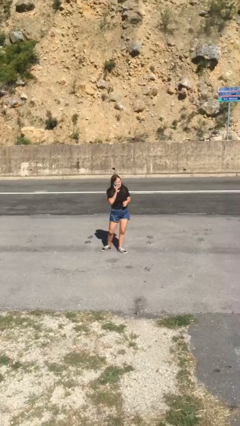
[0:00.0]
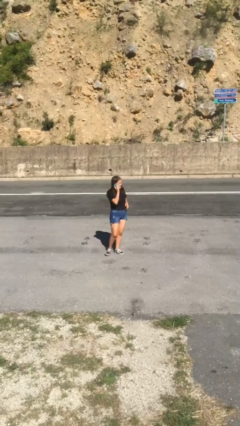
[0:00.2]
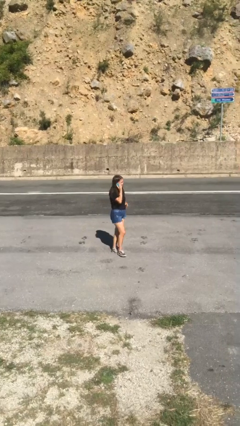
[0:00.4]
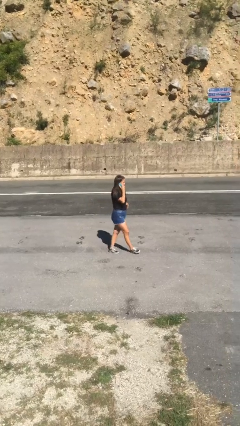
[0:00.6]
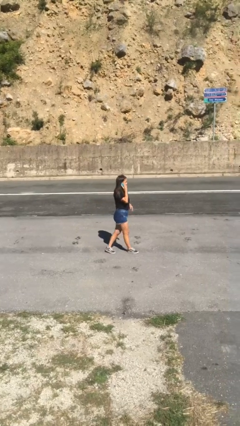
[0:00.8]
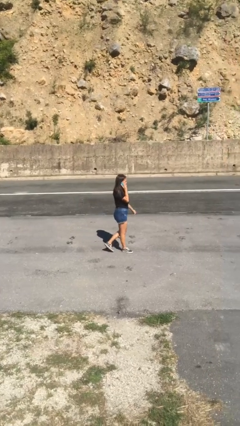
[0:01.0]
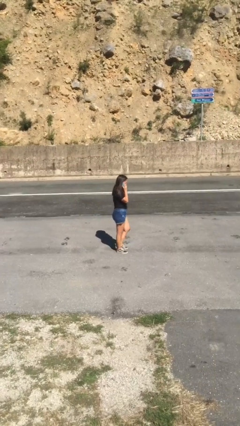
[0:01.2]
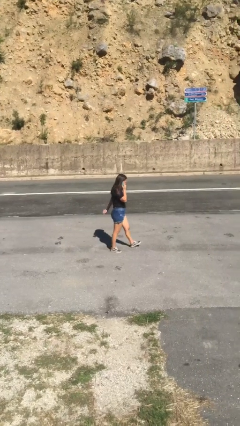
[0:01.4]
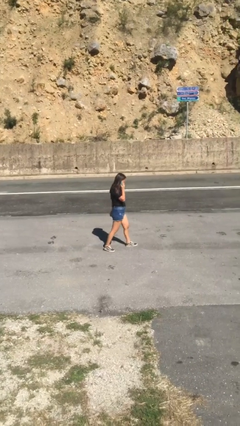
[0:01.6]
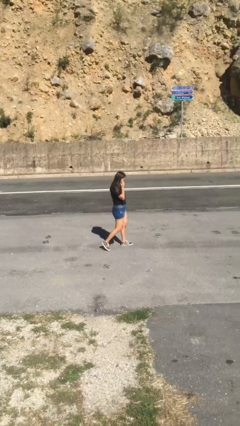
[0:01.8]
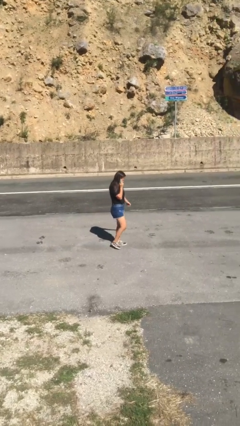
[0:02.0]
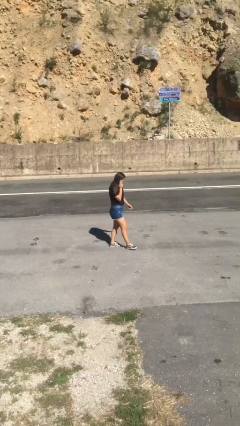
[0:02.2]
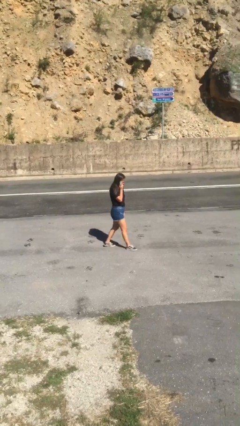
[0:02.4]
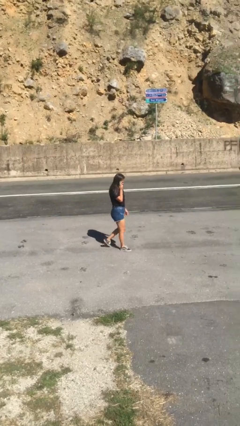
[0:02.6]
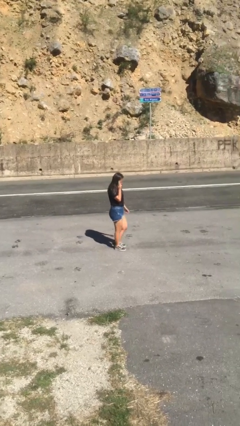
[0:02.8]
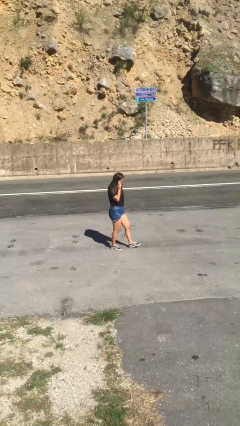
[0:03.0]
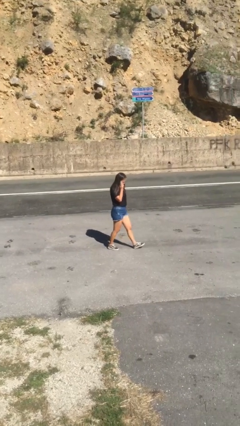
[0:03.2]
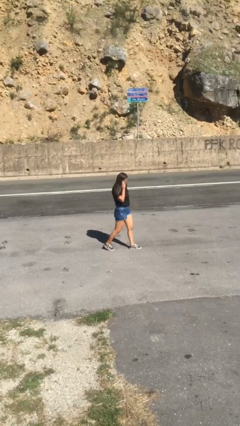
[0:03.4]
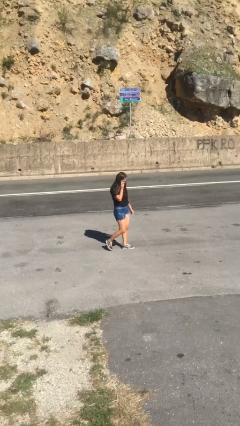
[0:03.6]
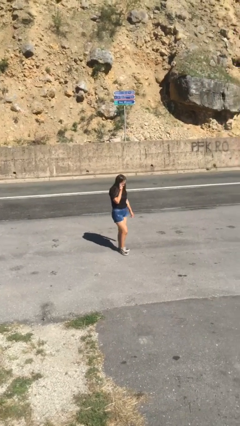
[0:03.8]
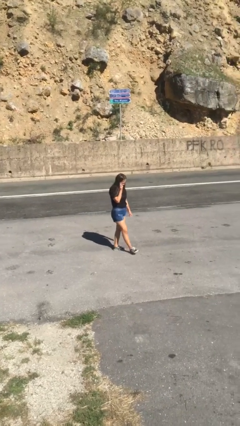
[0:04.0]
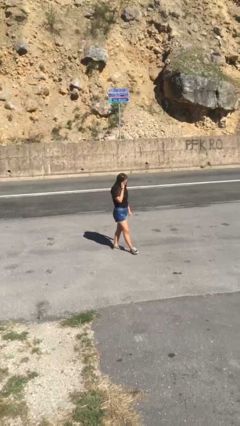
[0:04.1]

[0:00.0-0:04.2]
person talks on phone

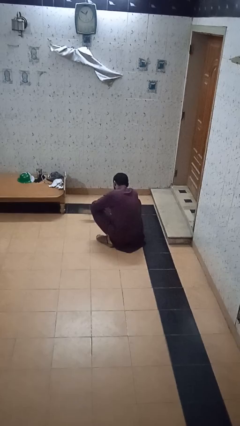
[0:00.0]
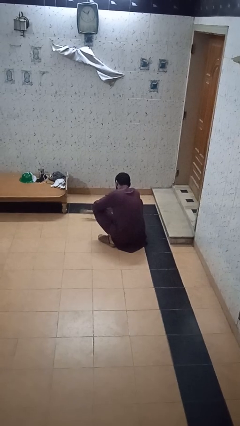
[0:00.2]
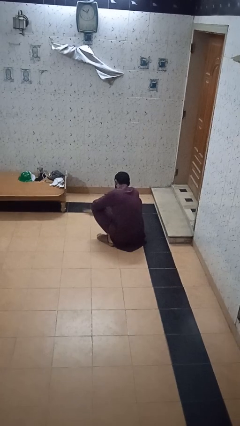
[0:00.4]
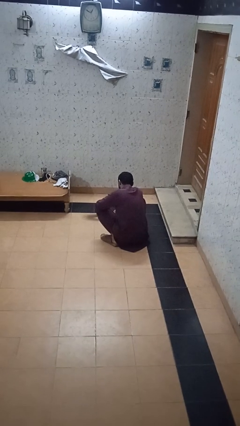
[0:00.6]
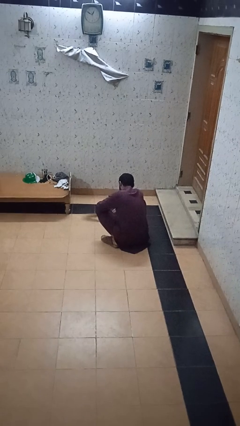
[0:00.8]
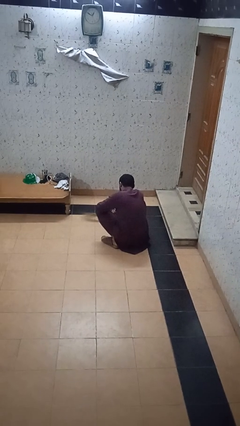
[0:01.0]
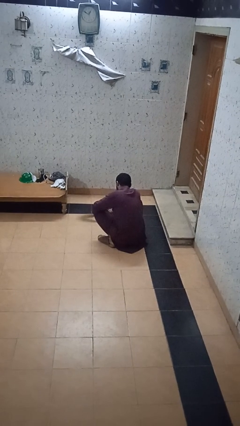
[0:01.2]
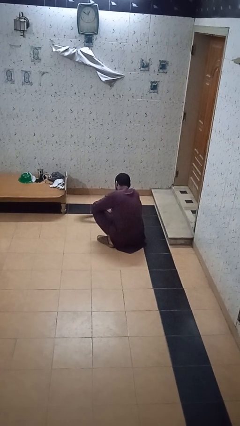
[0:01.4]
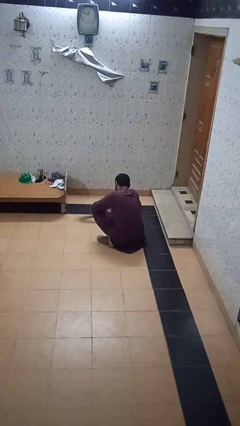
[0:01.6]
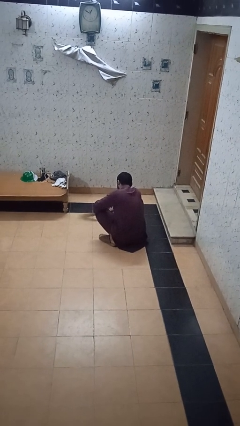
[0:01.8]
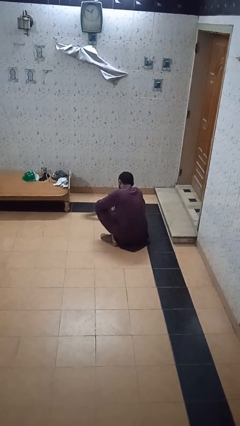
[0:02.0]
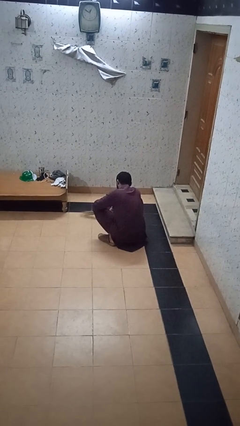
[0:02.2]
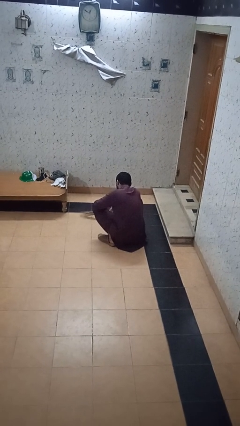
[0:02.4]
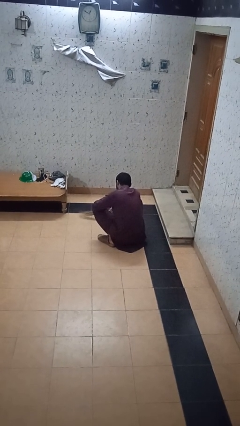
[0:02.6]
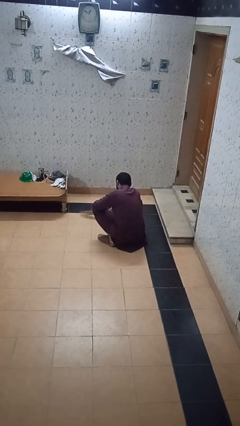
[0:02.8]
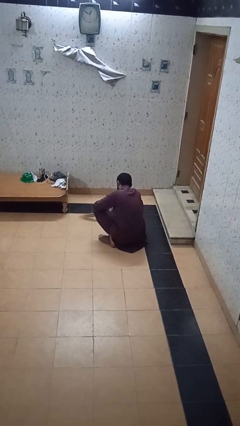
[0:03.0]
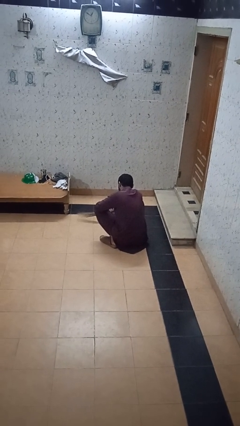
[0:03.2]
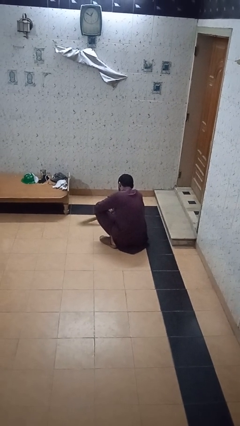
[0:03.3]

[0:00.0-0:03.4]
person sweeps floor

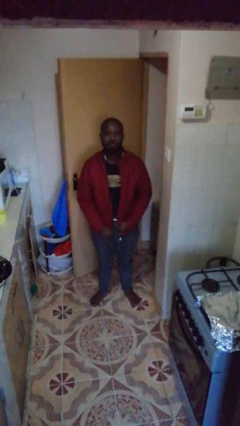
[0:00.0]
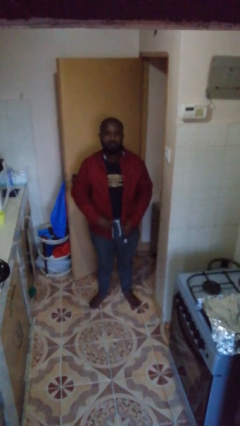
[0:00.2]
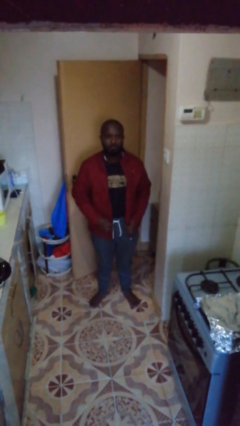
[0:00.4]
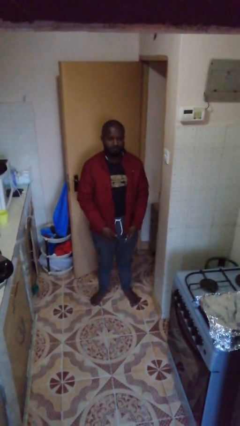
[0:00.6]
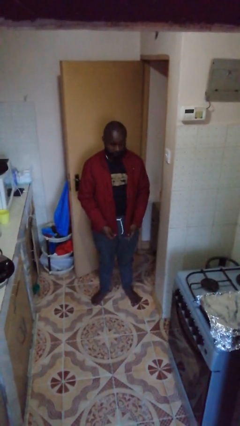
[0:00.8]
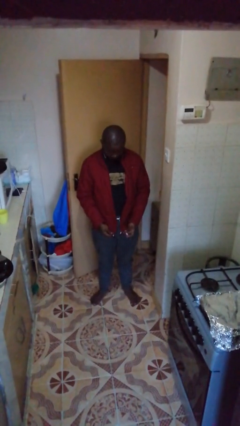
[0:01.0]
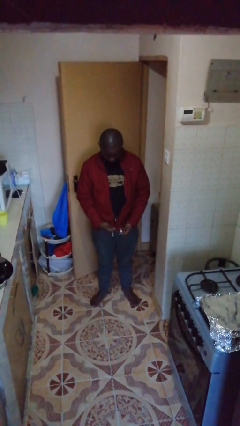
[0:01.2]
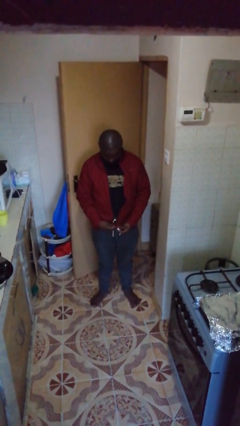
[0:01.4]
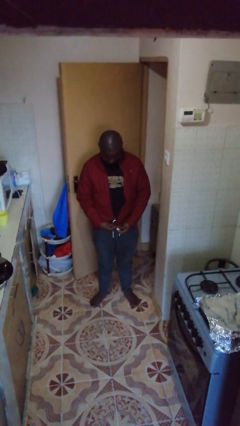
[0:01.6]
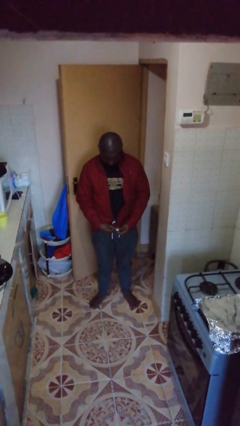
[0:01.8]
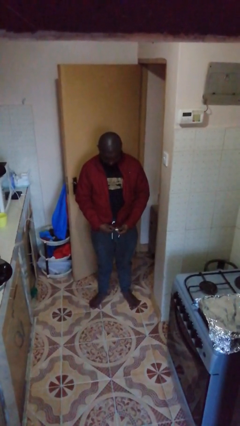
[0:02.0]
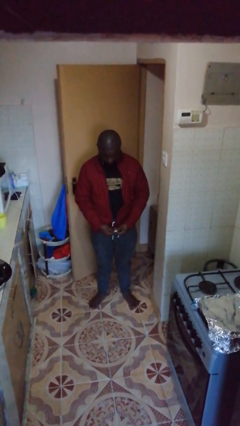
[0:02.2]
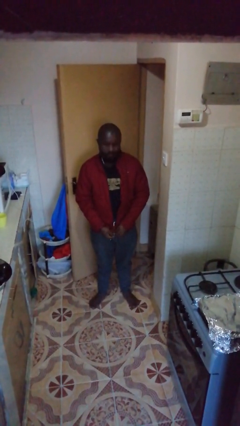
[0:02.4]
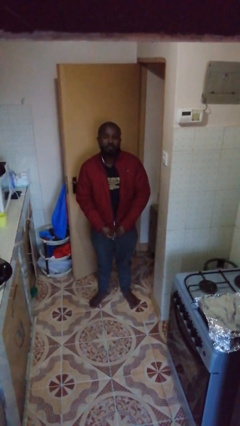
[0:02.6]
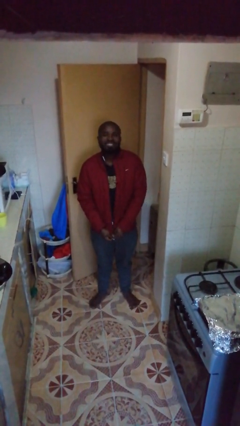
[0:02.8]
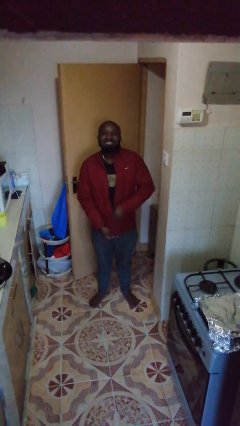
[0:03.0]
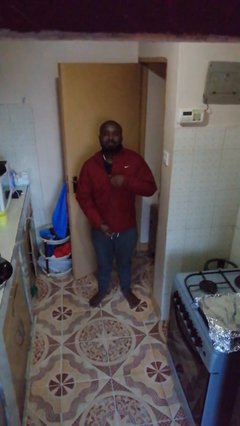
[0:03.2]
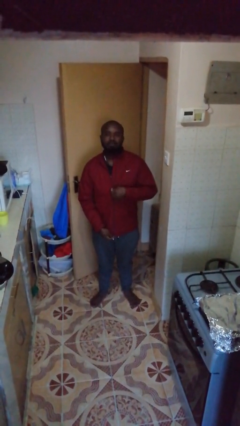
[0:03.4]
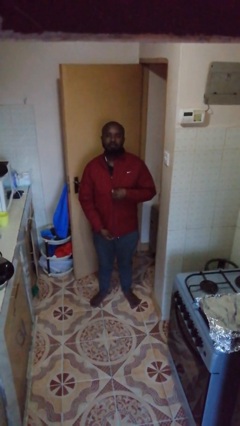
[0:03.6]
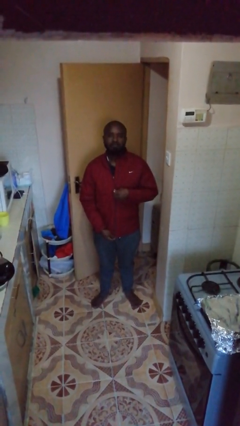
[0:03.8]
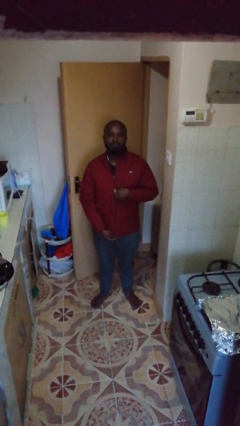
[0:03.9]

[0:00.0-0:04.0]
person zips up jacket

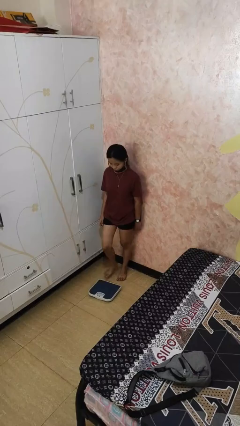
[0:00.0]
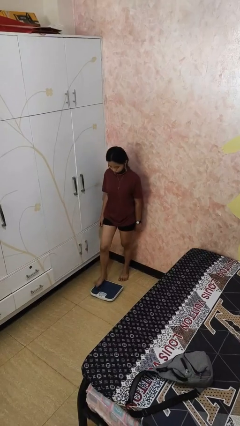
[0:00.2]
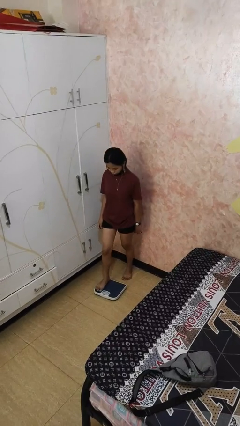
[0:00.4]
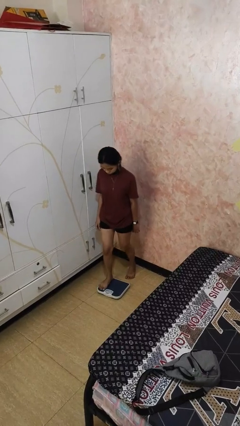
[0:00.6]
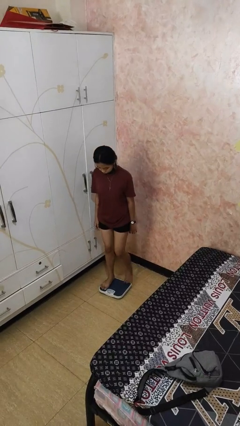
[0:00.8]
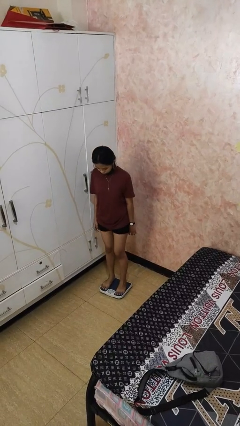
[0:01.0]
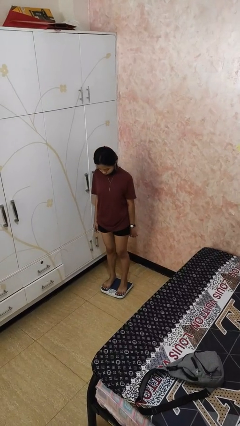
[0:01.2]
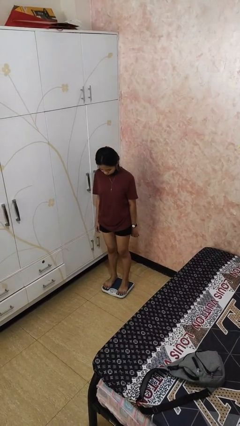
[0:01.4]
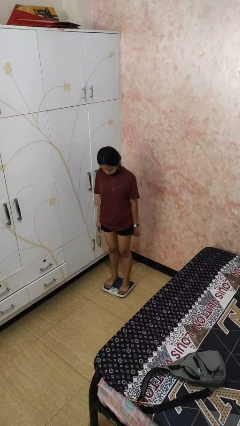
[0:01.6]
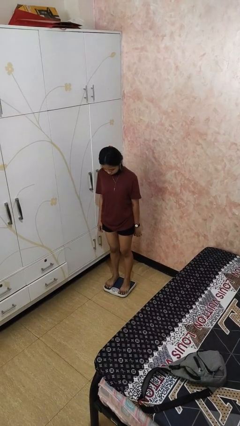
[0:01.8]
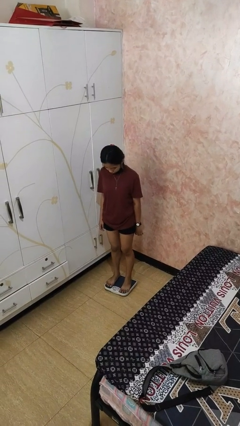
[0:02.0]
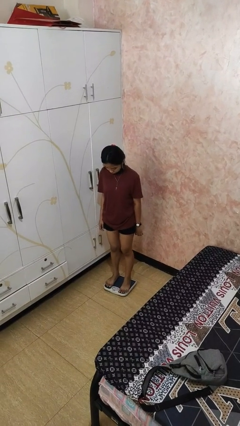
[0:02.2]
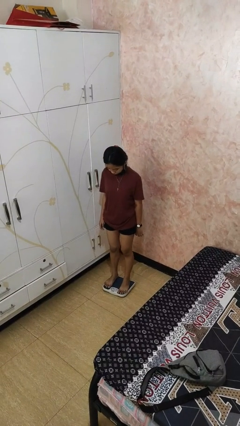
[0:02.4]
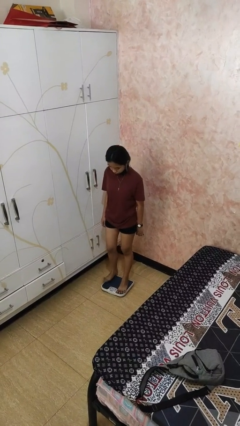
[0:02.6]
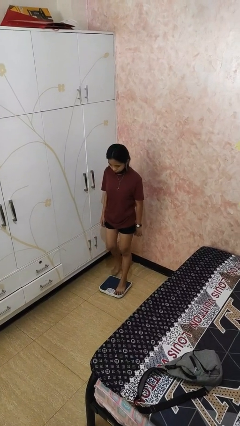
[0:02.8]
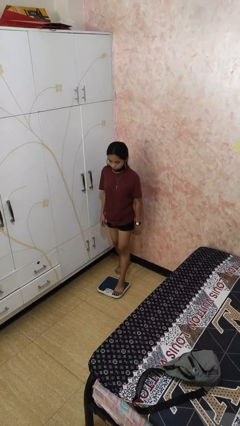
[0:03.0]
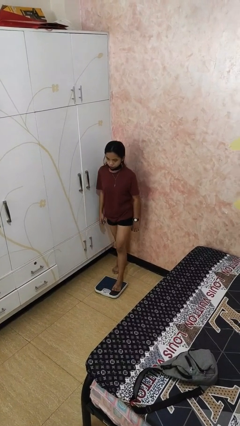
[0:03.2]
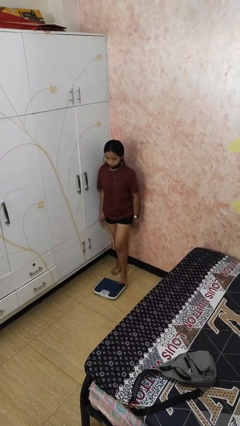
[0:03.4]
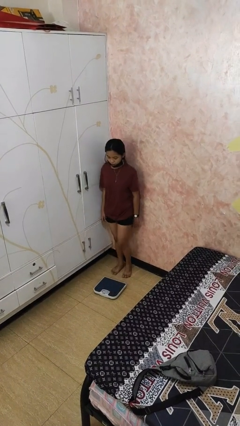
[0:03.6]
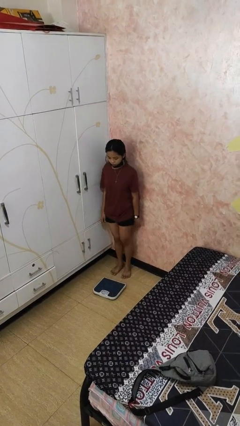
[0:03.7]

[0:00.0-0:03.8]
person uses bodyweight scale

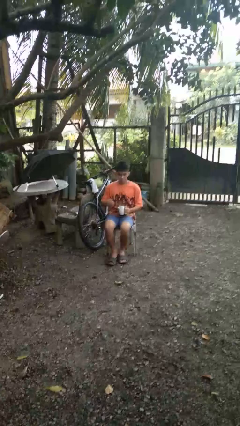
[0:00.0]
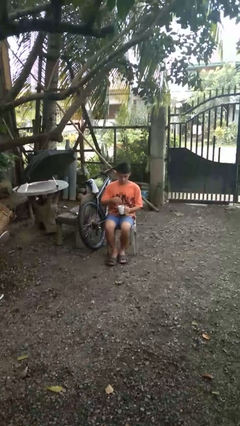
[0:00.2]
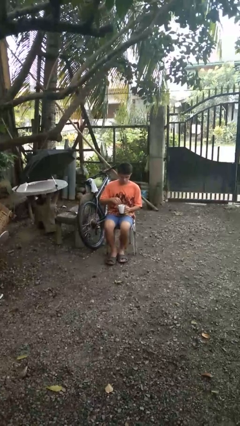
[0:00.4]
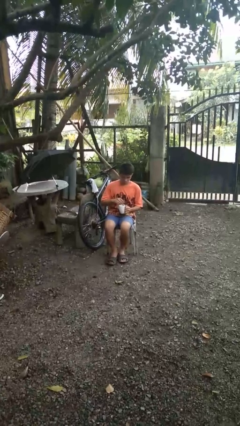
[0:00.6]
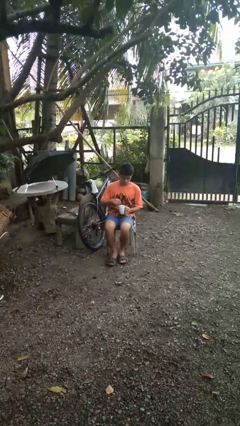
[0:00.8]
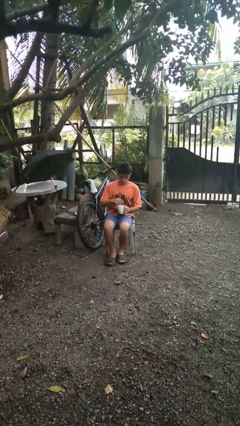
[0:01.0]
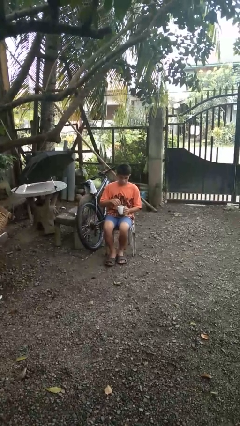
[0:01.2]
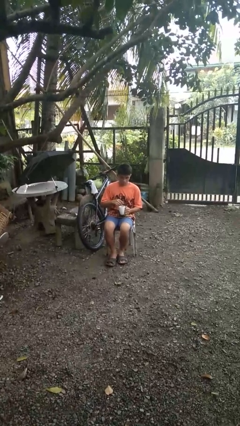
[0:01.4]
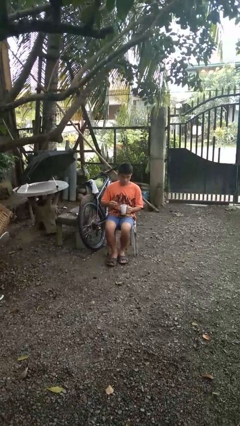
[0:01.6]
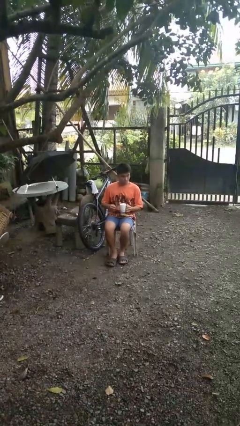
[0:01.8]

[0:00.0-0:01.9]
person stirs mug

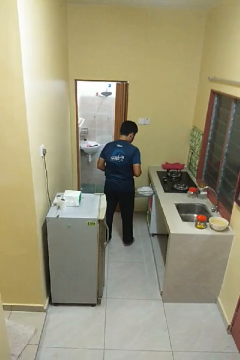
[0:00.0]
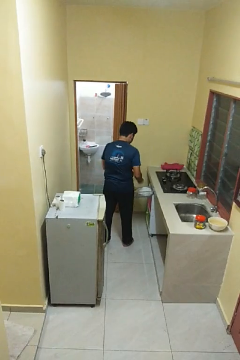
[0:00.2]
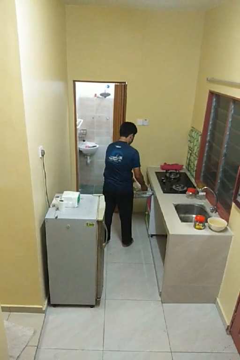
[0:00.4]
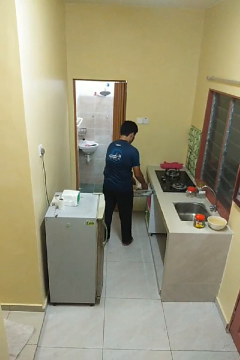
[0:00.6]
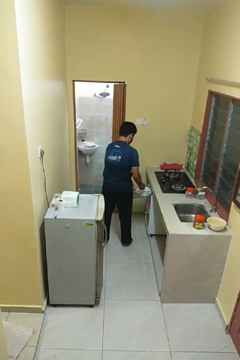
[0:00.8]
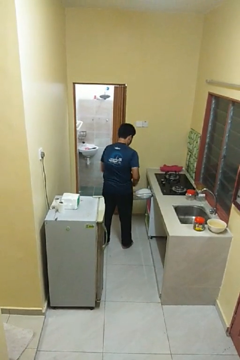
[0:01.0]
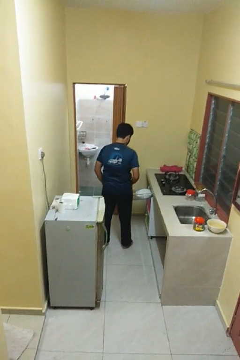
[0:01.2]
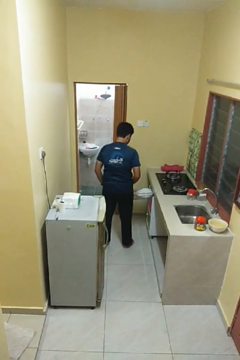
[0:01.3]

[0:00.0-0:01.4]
person puts object into kitchen drawer
